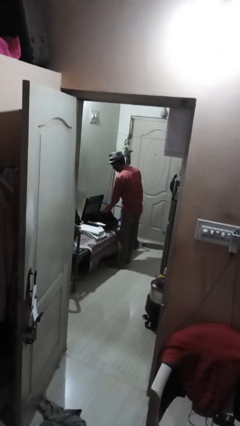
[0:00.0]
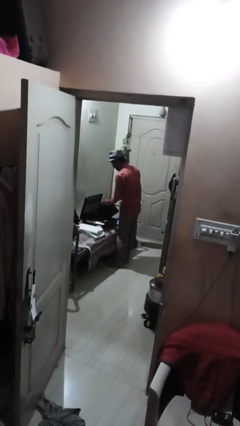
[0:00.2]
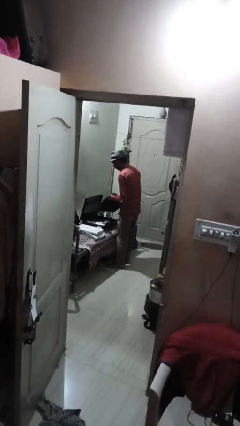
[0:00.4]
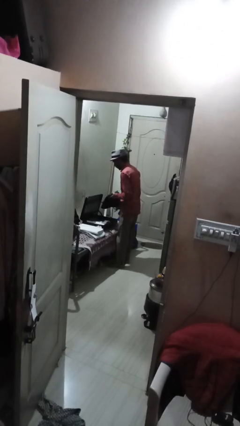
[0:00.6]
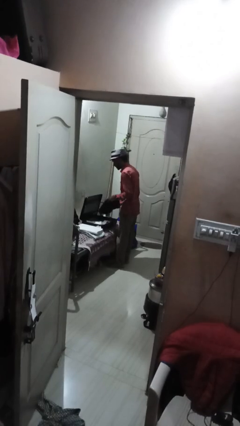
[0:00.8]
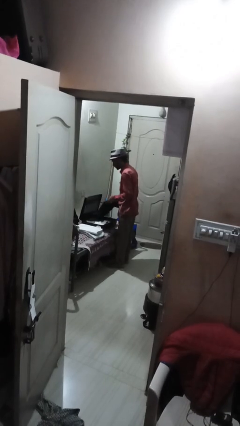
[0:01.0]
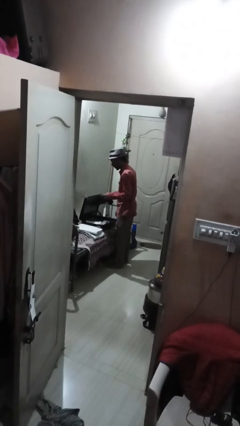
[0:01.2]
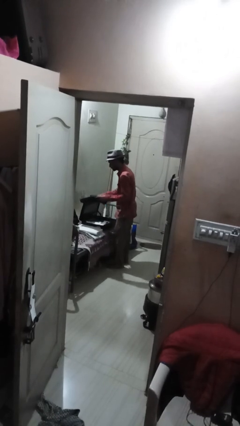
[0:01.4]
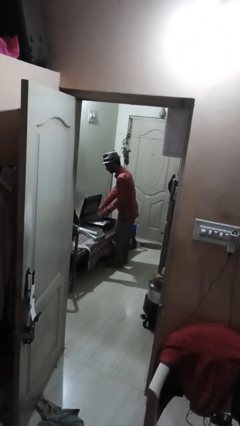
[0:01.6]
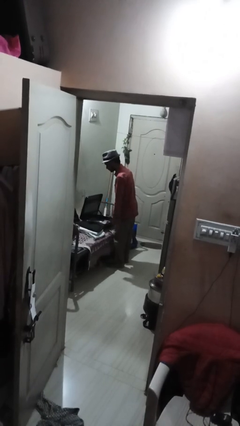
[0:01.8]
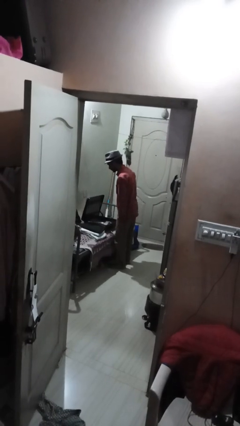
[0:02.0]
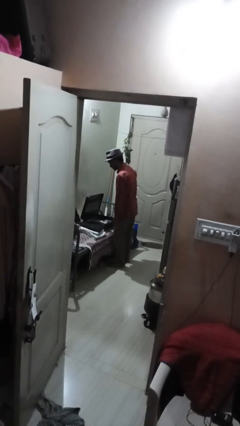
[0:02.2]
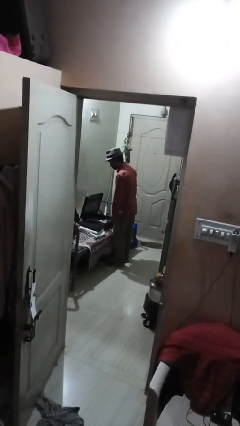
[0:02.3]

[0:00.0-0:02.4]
person unloads clothes from suitcase

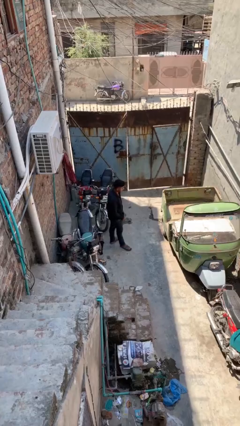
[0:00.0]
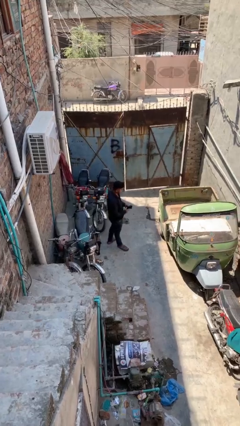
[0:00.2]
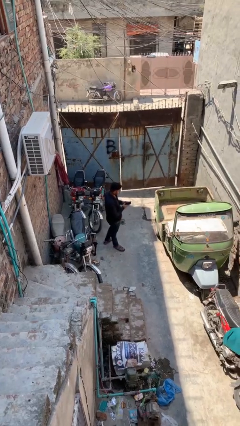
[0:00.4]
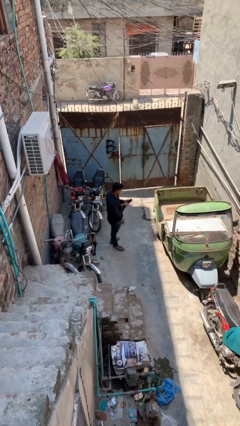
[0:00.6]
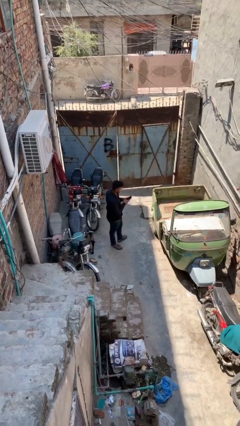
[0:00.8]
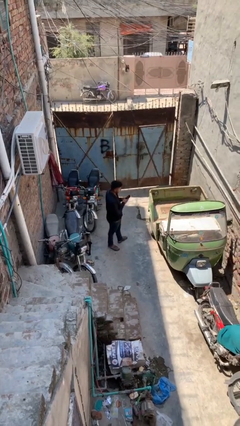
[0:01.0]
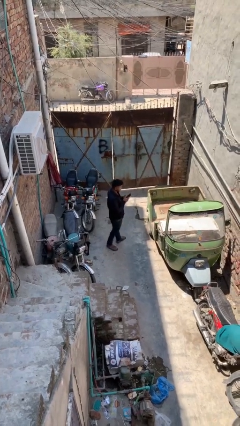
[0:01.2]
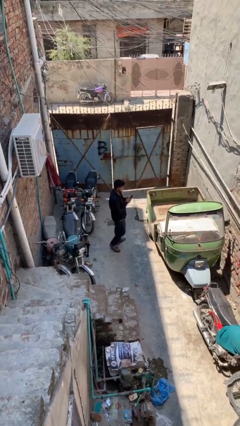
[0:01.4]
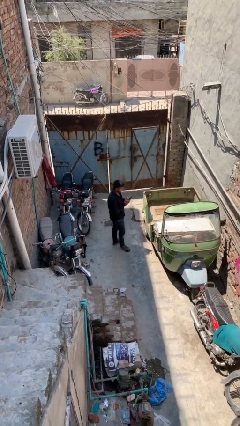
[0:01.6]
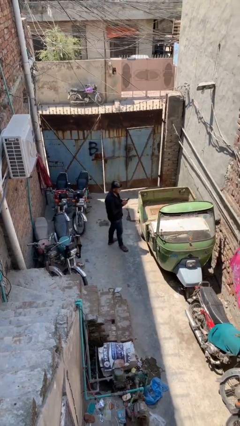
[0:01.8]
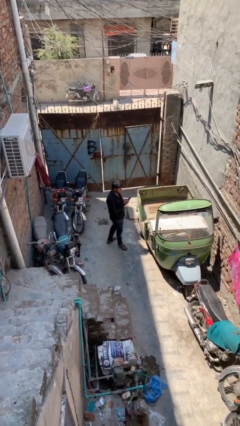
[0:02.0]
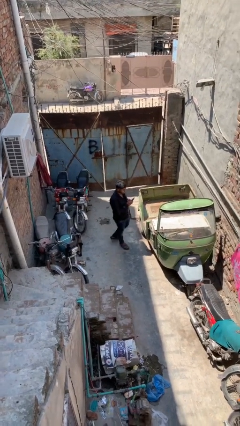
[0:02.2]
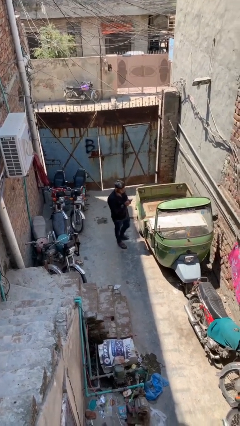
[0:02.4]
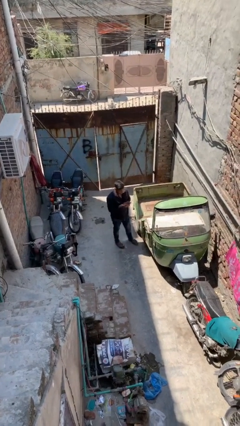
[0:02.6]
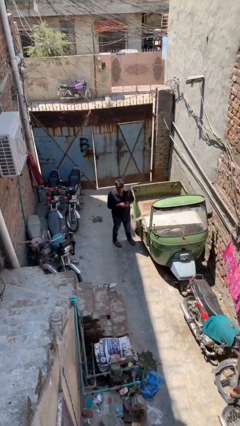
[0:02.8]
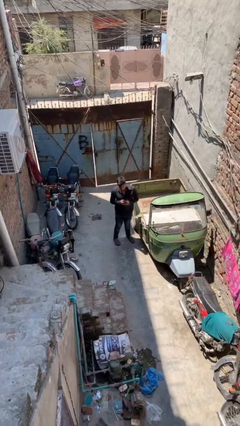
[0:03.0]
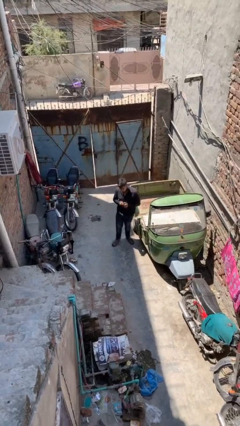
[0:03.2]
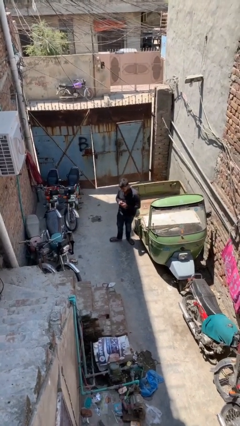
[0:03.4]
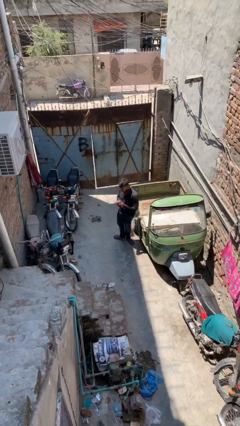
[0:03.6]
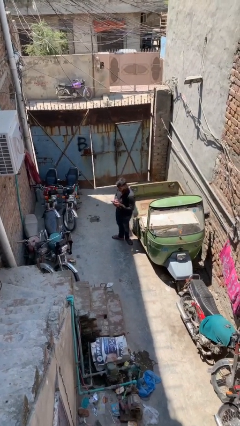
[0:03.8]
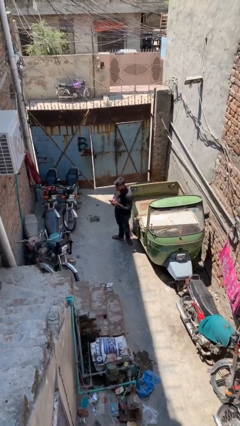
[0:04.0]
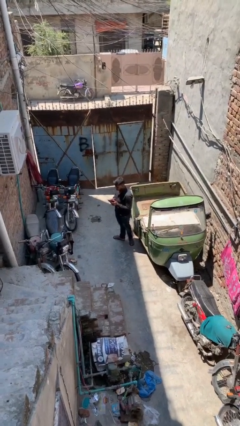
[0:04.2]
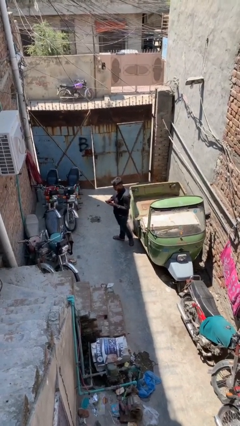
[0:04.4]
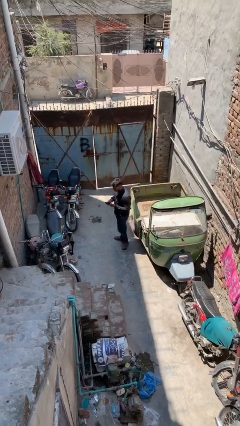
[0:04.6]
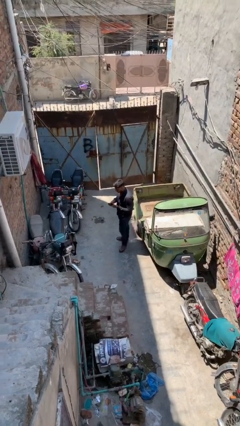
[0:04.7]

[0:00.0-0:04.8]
person texts on phone

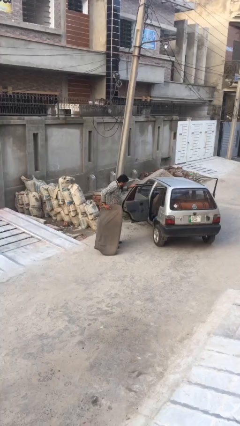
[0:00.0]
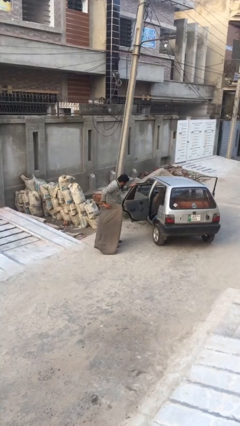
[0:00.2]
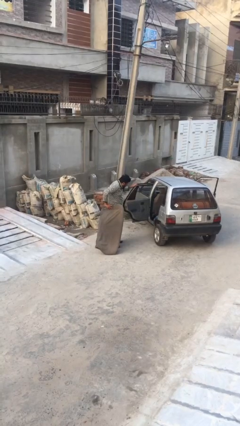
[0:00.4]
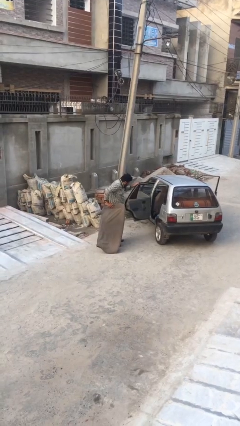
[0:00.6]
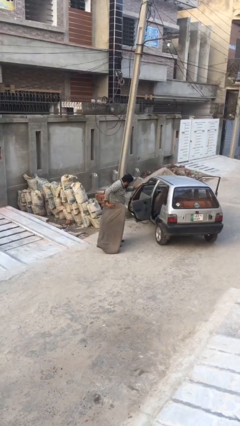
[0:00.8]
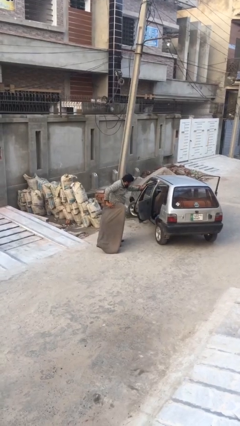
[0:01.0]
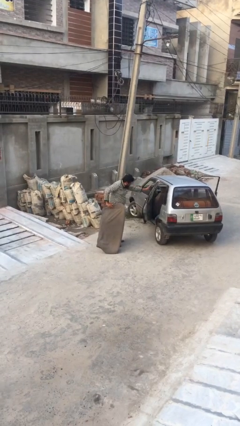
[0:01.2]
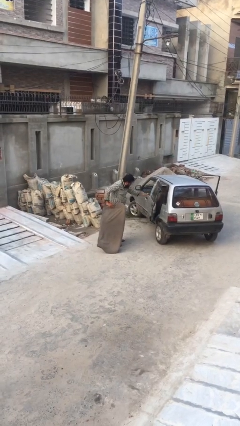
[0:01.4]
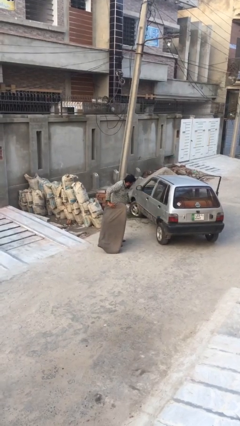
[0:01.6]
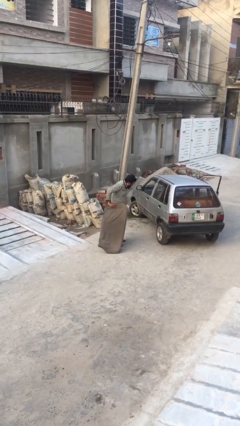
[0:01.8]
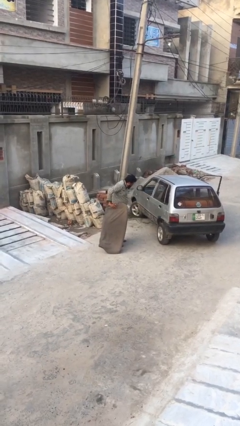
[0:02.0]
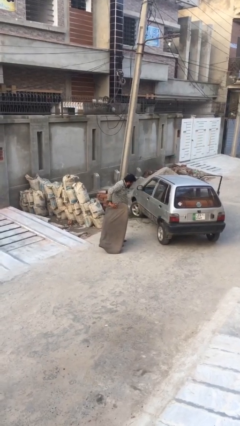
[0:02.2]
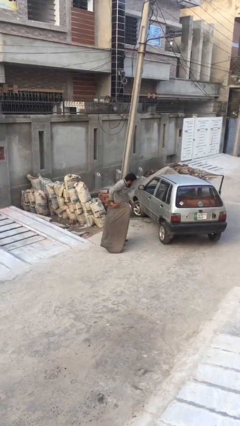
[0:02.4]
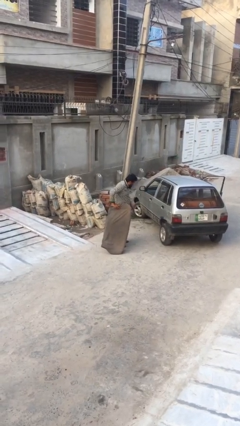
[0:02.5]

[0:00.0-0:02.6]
person closes car door

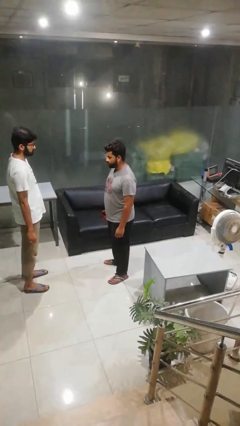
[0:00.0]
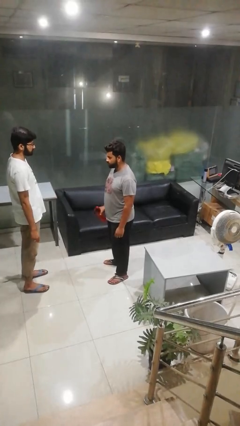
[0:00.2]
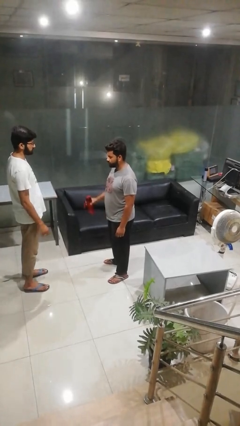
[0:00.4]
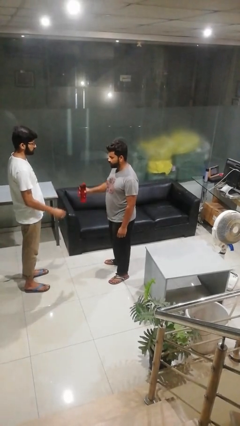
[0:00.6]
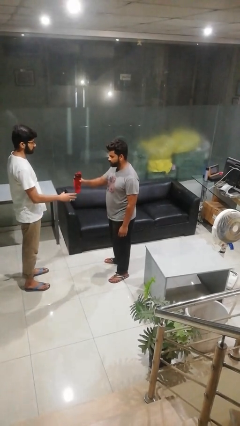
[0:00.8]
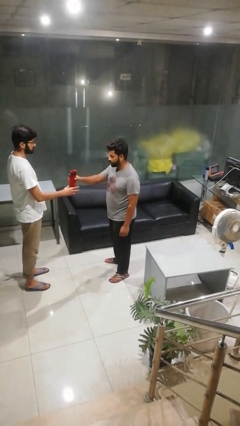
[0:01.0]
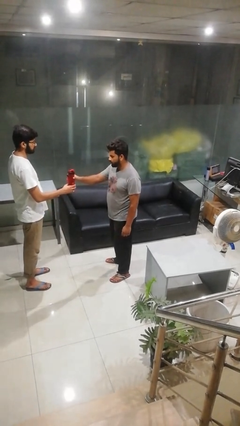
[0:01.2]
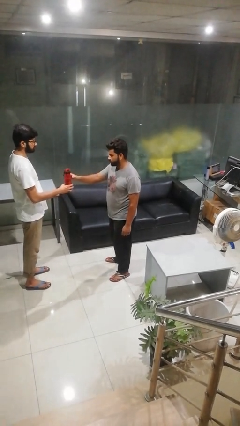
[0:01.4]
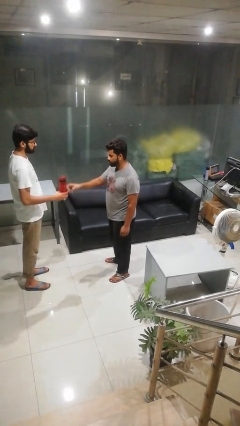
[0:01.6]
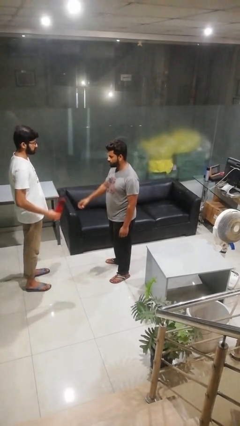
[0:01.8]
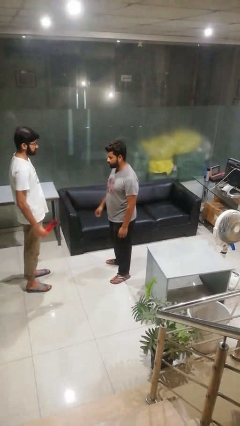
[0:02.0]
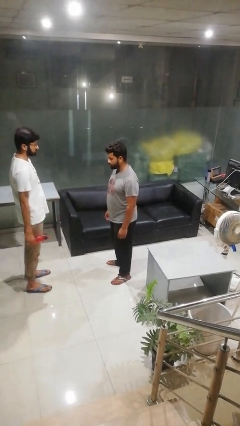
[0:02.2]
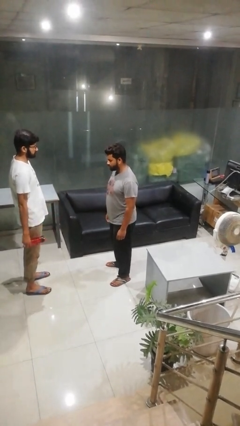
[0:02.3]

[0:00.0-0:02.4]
person transfers object to person

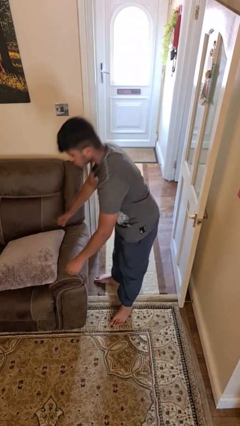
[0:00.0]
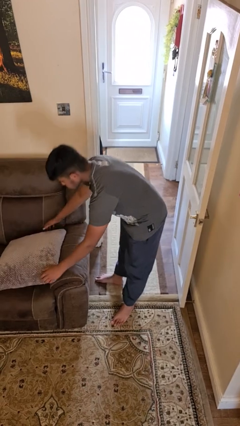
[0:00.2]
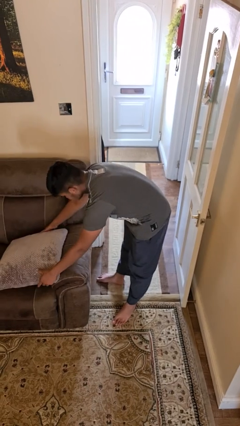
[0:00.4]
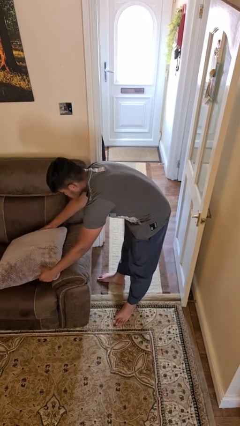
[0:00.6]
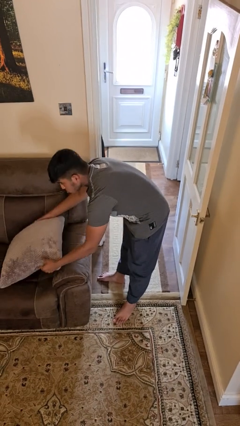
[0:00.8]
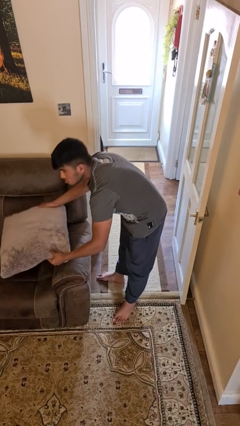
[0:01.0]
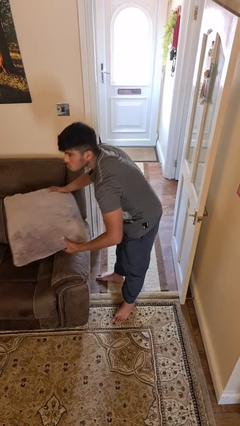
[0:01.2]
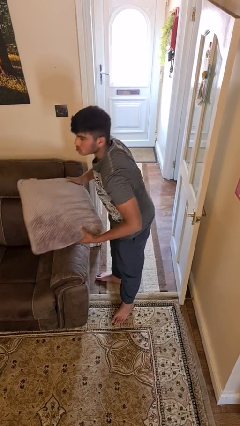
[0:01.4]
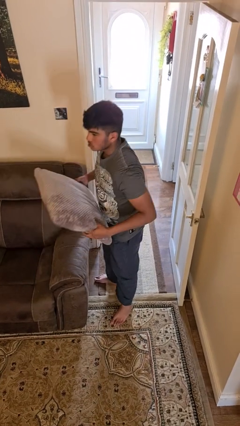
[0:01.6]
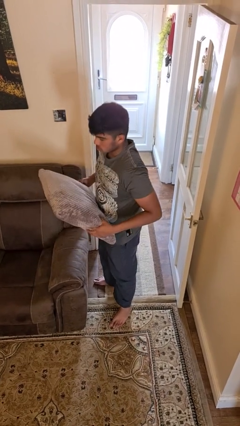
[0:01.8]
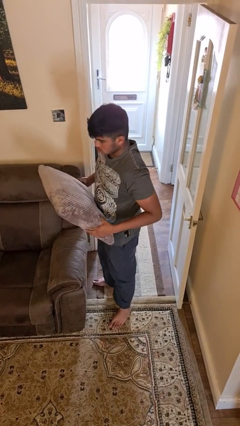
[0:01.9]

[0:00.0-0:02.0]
person picks up object from couch

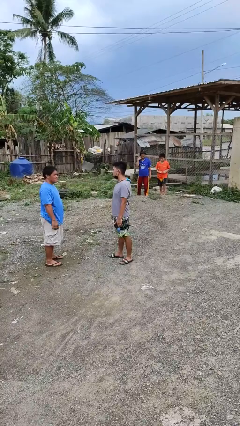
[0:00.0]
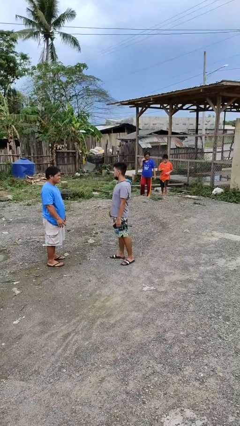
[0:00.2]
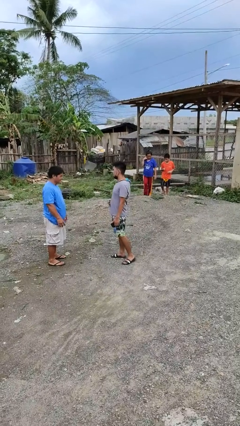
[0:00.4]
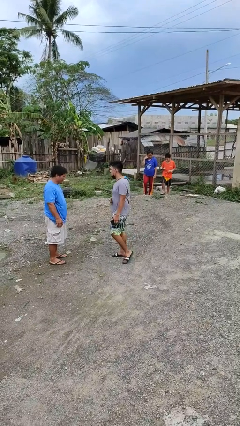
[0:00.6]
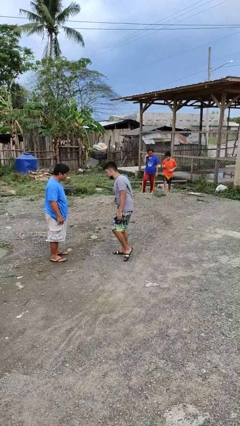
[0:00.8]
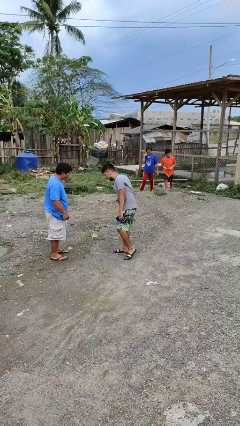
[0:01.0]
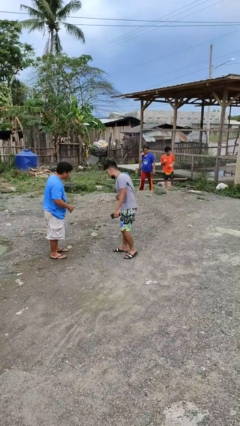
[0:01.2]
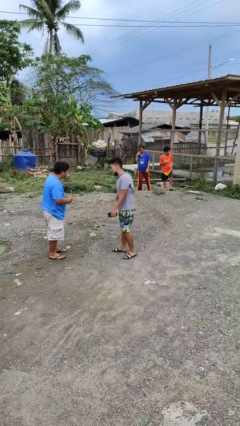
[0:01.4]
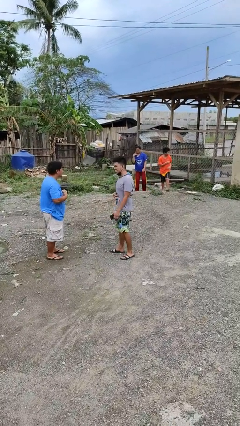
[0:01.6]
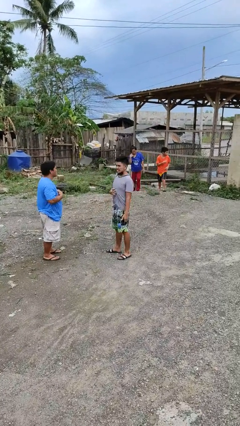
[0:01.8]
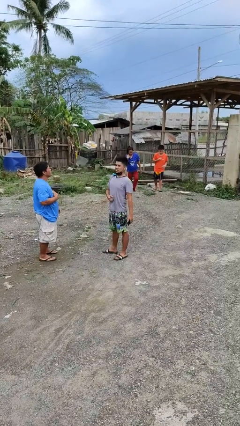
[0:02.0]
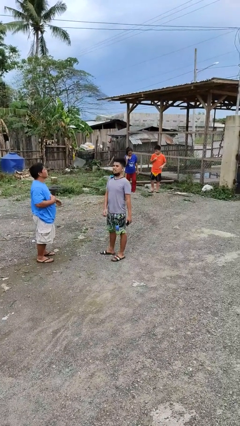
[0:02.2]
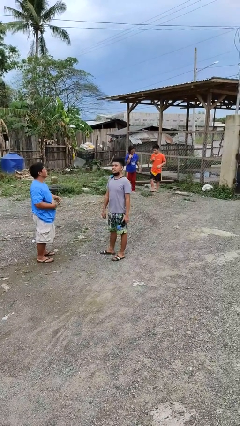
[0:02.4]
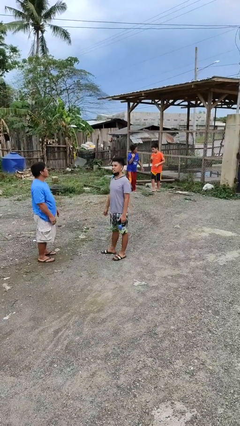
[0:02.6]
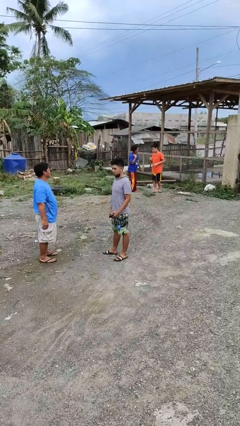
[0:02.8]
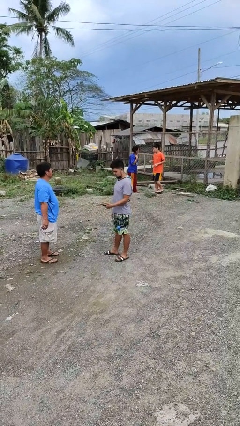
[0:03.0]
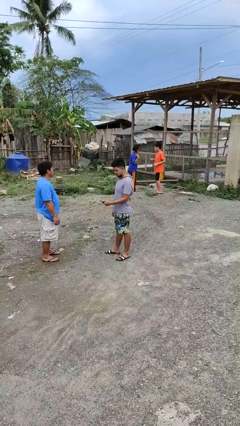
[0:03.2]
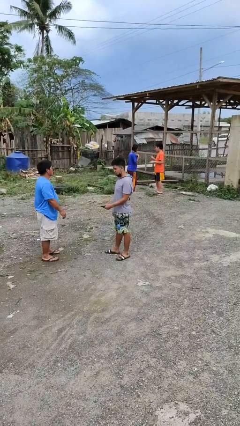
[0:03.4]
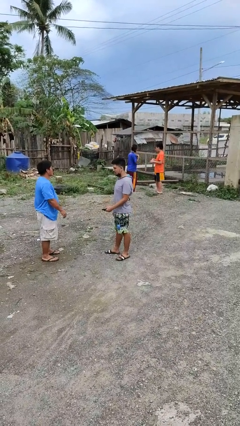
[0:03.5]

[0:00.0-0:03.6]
person laughs with person
